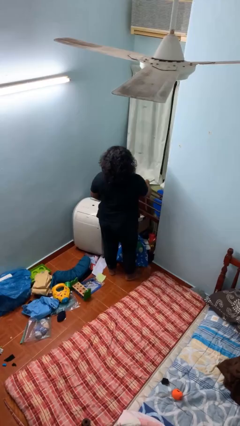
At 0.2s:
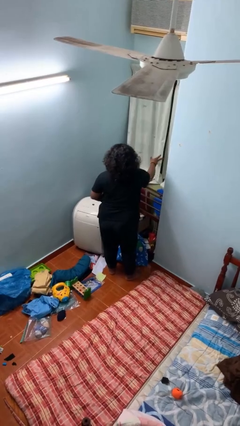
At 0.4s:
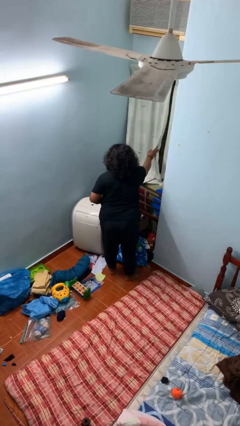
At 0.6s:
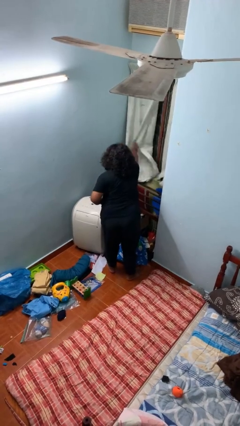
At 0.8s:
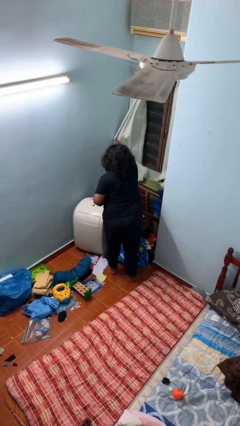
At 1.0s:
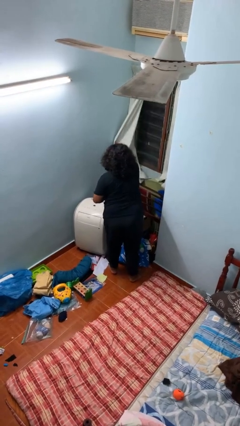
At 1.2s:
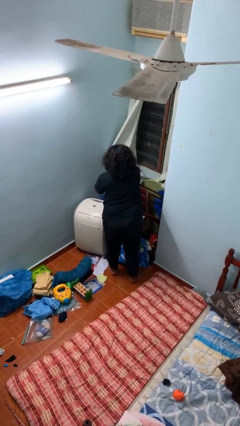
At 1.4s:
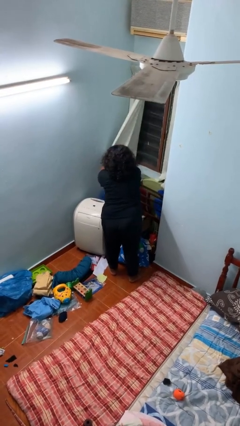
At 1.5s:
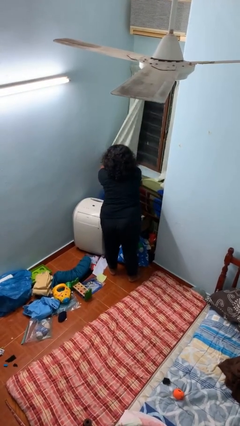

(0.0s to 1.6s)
person opens curtains

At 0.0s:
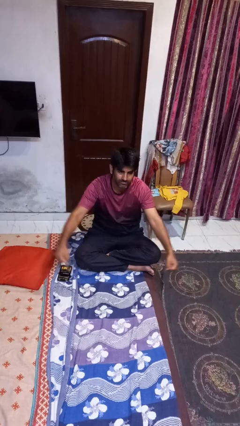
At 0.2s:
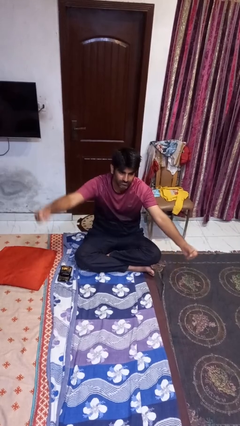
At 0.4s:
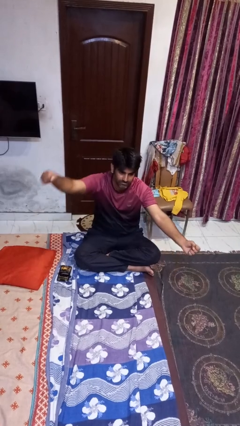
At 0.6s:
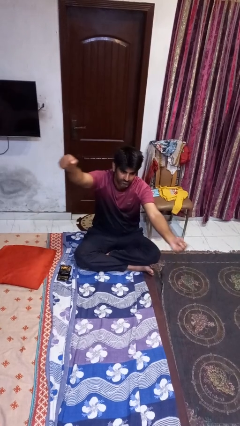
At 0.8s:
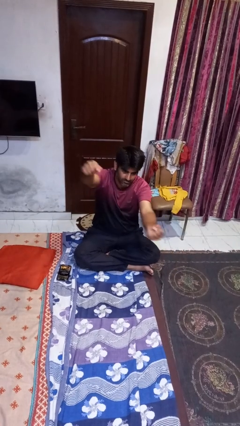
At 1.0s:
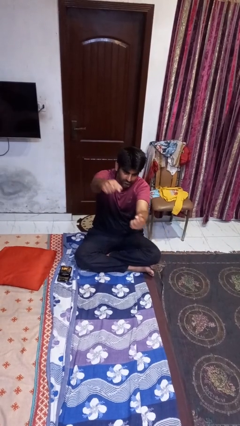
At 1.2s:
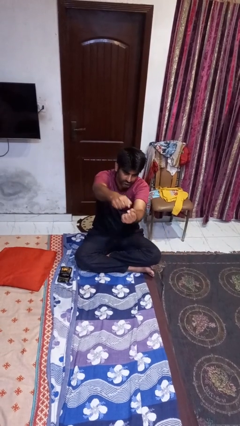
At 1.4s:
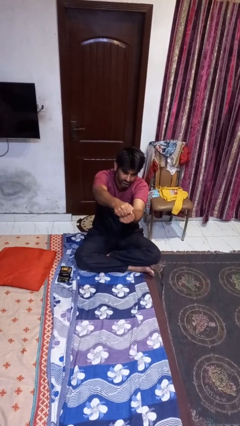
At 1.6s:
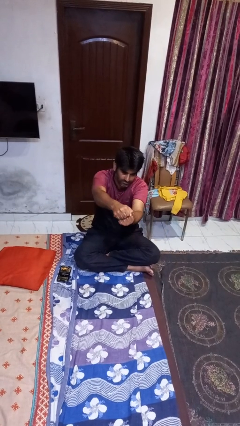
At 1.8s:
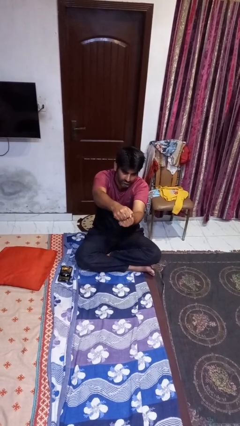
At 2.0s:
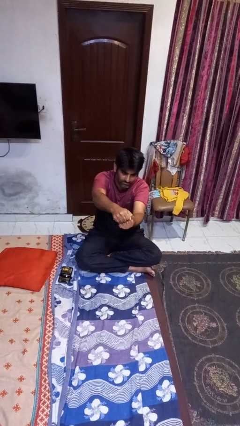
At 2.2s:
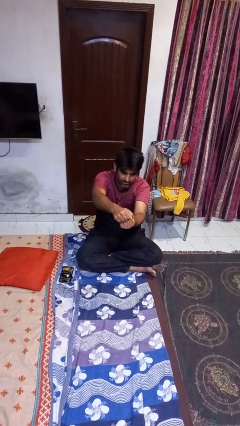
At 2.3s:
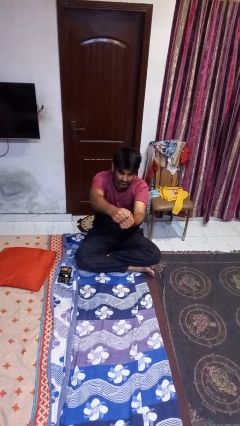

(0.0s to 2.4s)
person gestures zoom in
